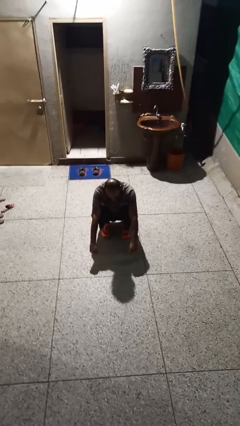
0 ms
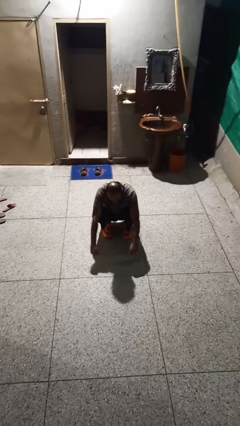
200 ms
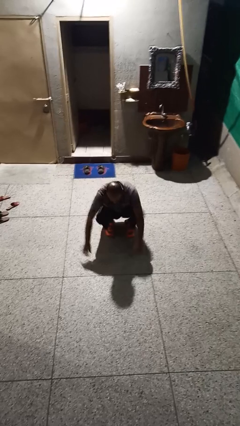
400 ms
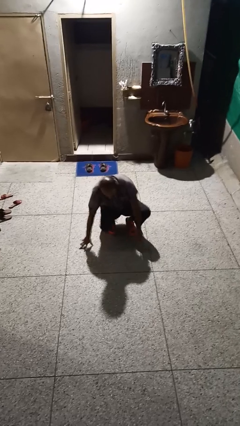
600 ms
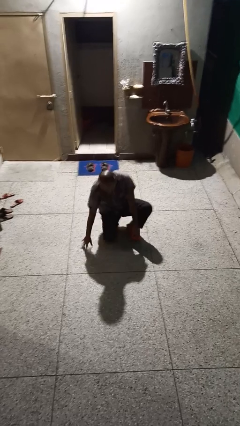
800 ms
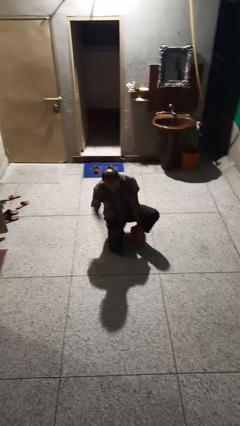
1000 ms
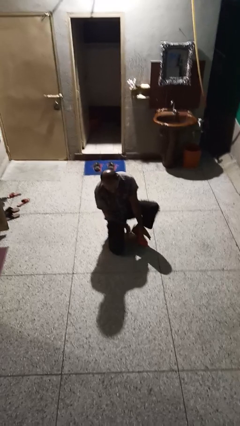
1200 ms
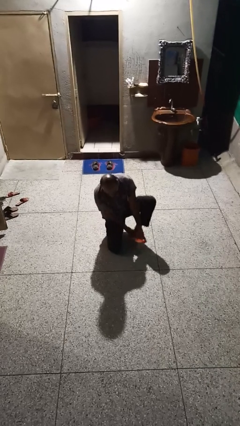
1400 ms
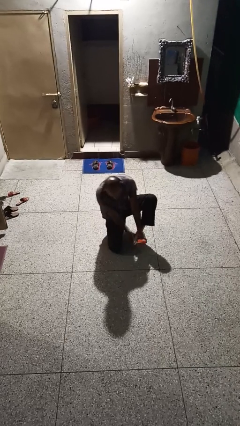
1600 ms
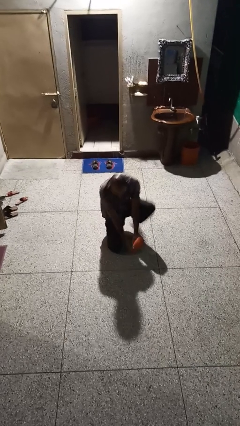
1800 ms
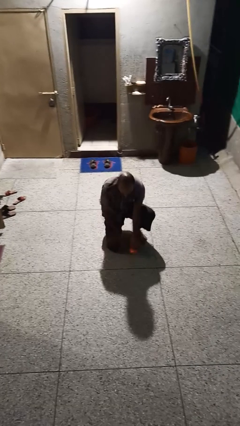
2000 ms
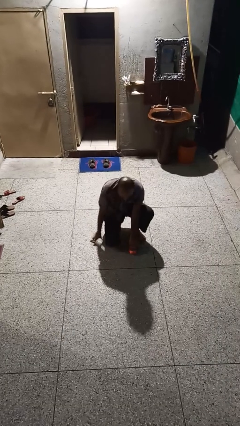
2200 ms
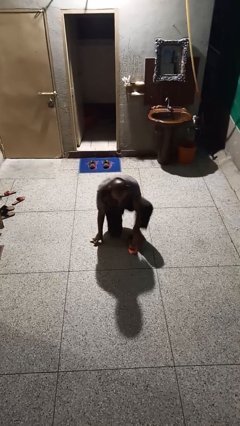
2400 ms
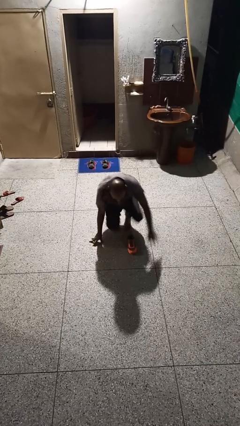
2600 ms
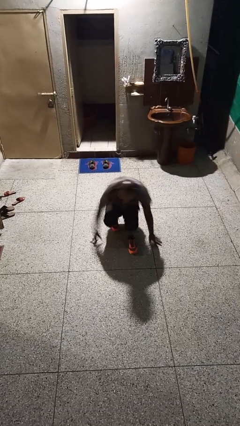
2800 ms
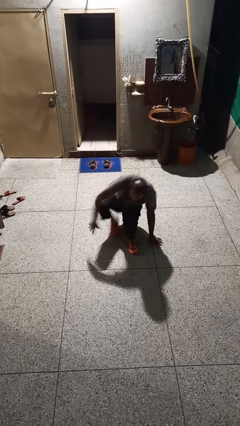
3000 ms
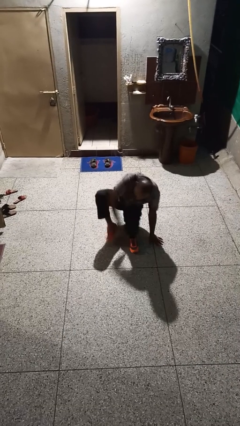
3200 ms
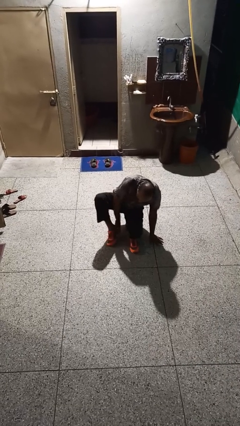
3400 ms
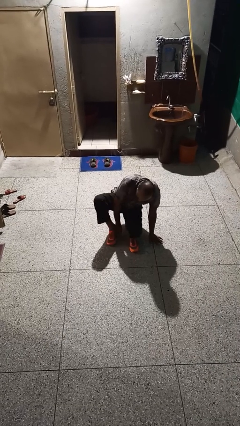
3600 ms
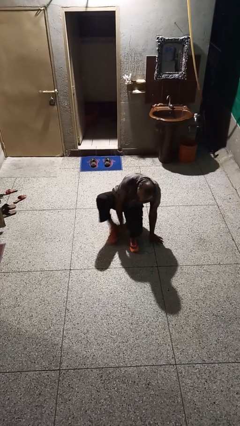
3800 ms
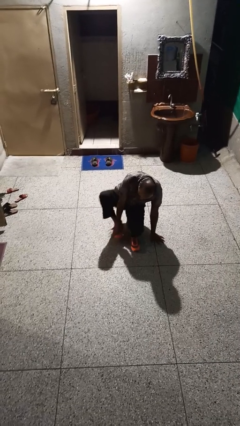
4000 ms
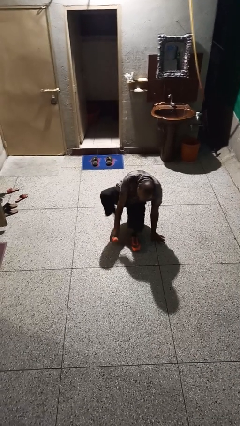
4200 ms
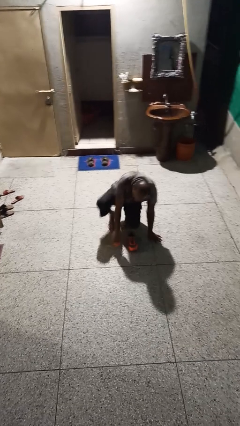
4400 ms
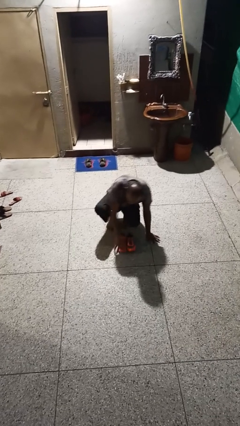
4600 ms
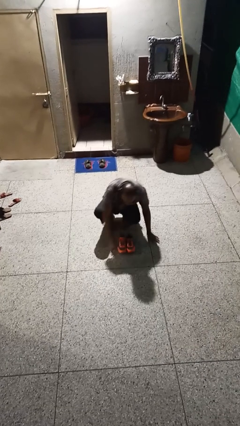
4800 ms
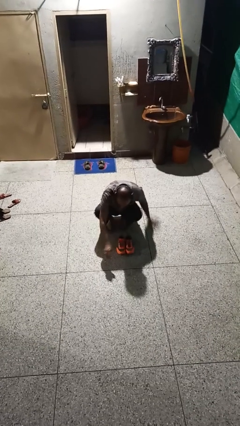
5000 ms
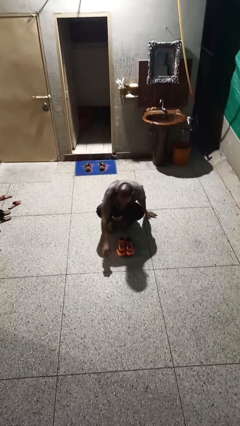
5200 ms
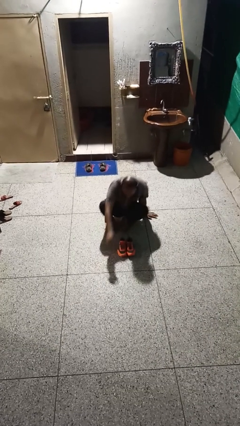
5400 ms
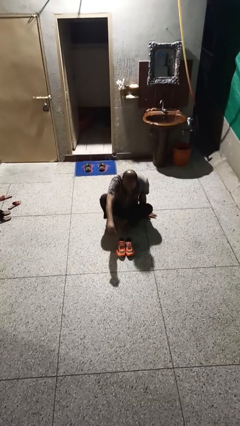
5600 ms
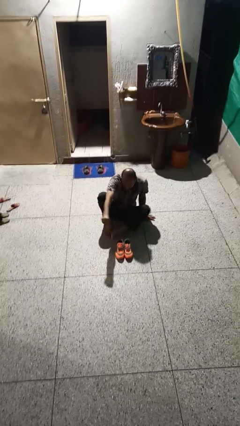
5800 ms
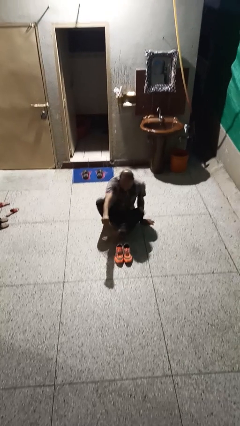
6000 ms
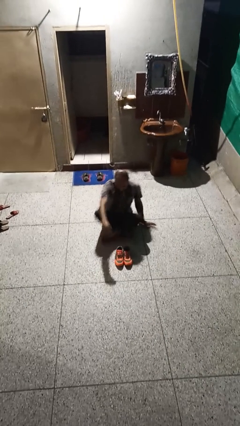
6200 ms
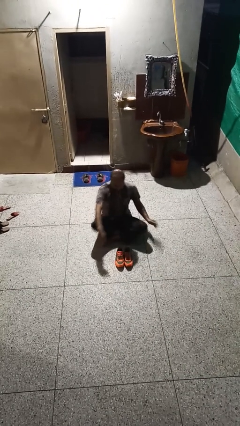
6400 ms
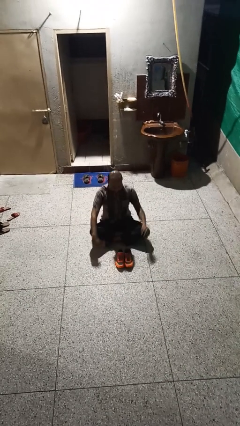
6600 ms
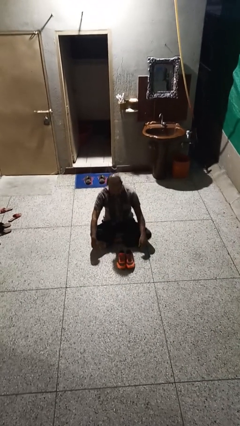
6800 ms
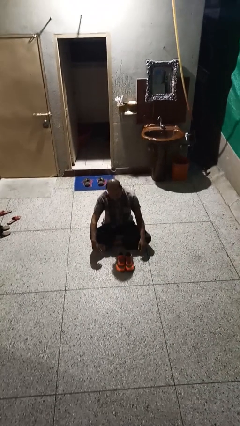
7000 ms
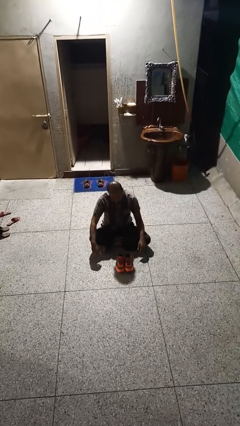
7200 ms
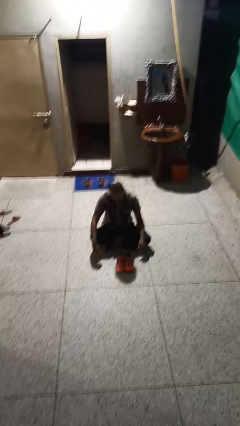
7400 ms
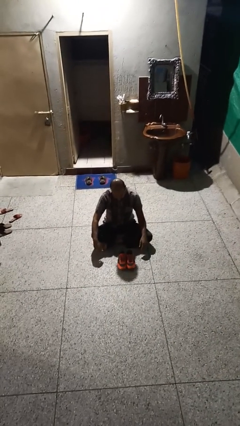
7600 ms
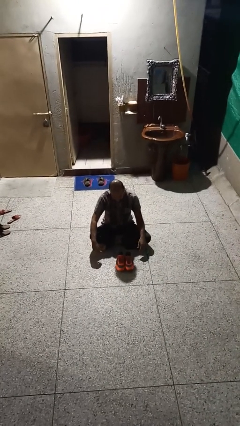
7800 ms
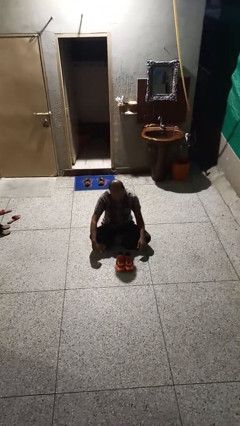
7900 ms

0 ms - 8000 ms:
person takes off shoes

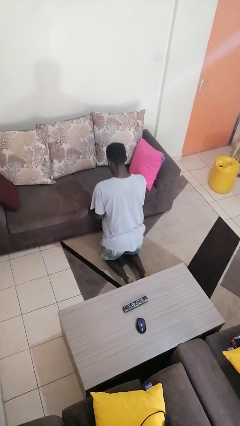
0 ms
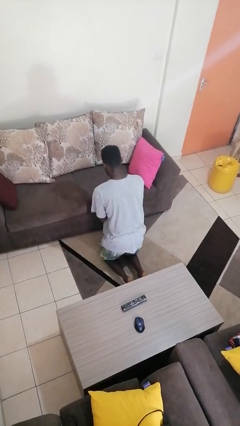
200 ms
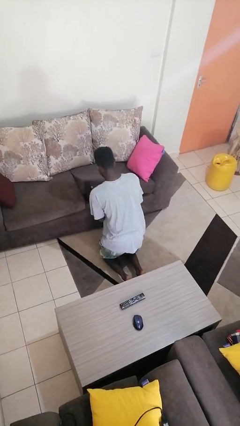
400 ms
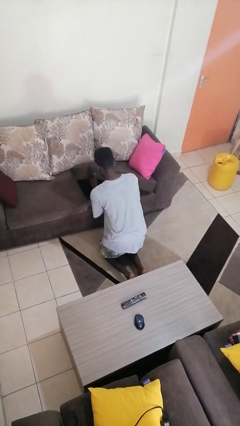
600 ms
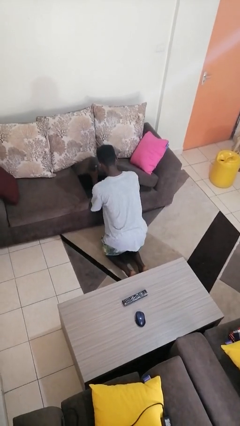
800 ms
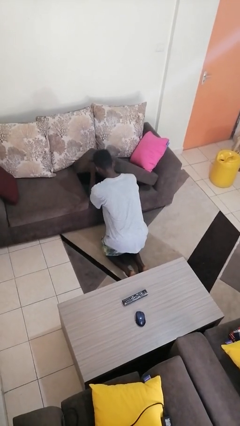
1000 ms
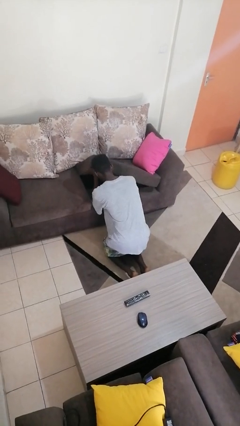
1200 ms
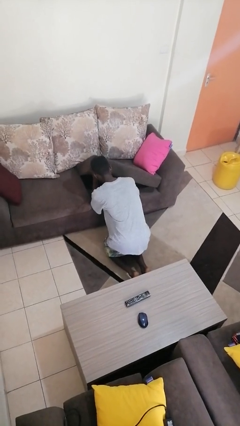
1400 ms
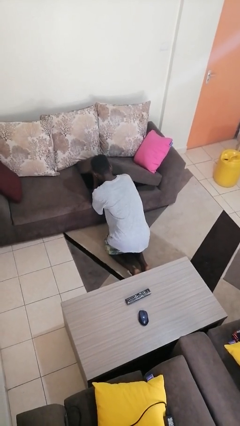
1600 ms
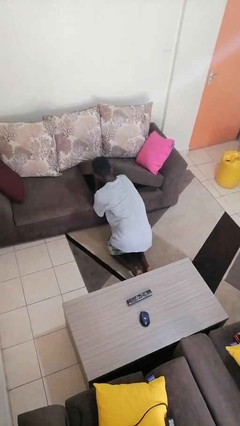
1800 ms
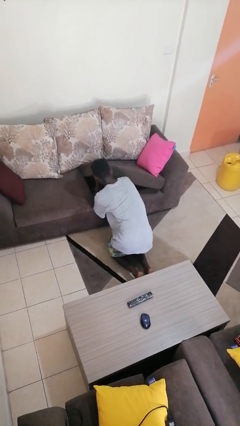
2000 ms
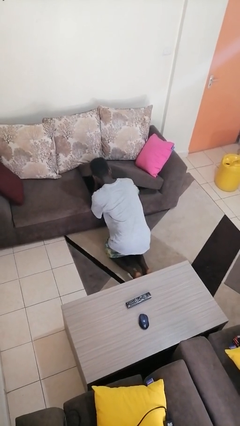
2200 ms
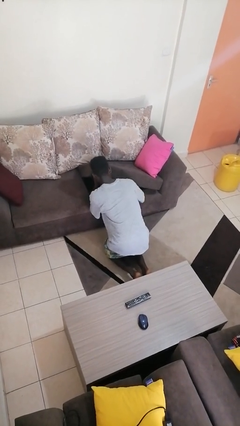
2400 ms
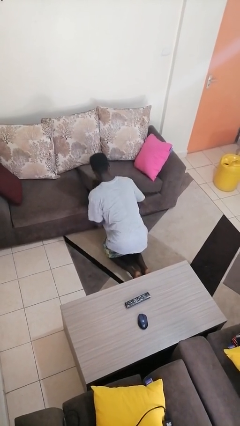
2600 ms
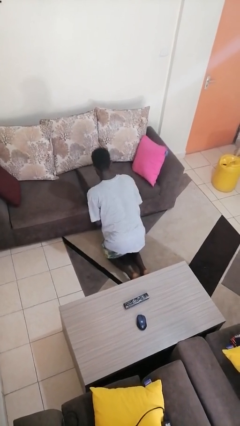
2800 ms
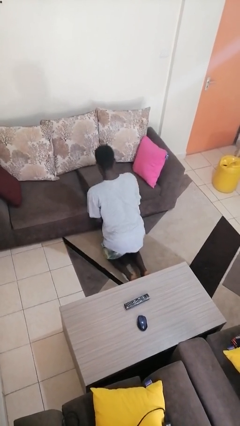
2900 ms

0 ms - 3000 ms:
person searches under couch

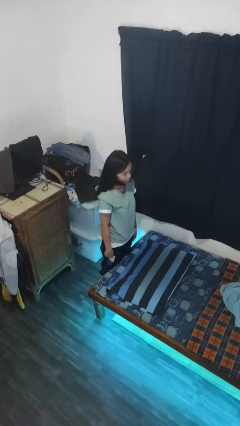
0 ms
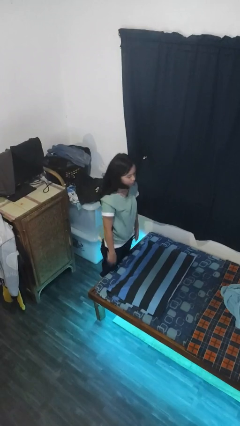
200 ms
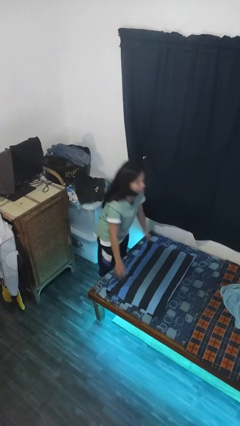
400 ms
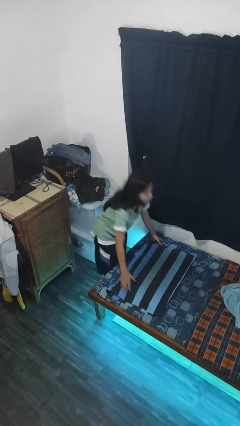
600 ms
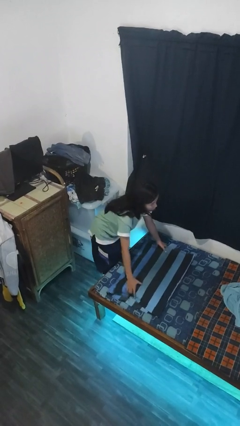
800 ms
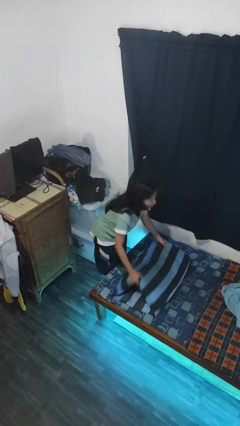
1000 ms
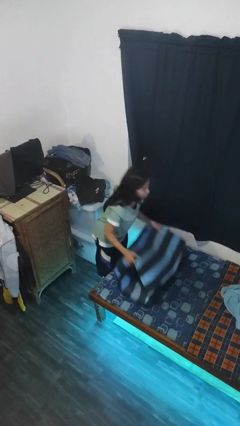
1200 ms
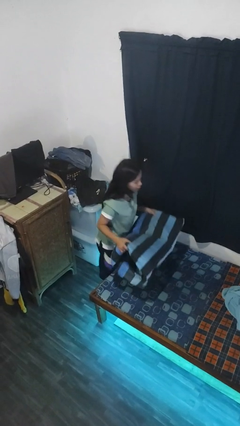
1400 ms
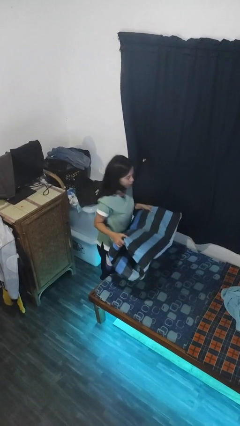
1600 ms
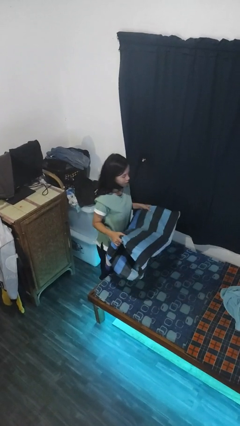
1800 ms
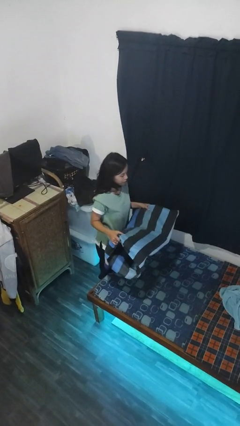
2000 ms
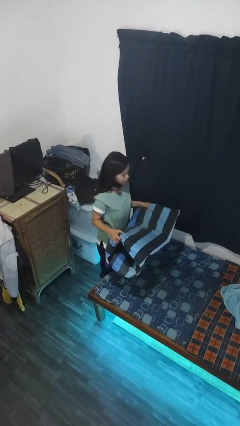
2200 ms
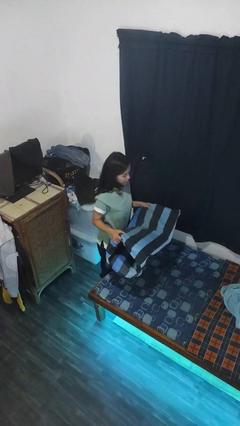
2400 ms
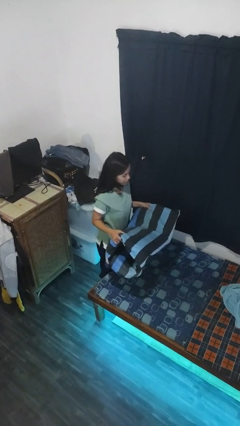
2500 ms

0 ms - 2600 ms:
person picks up object from bed

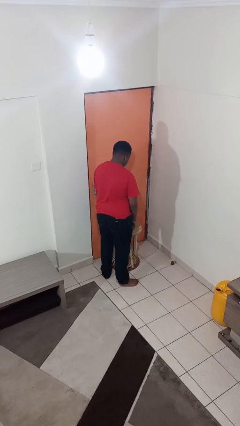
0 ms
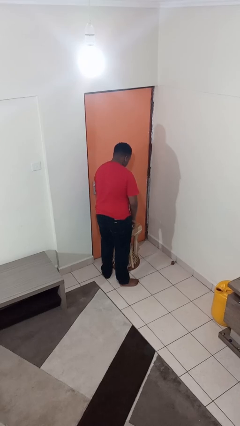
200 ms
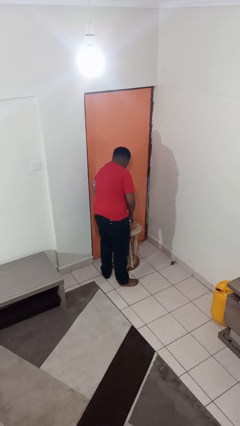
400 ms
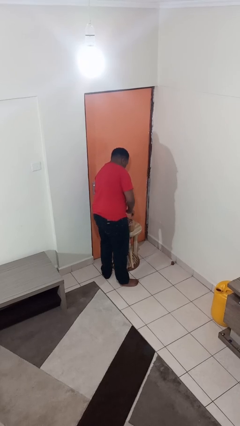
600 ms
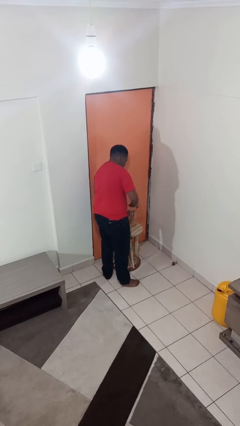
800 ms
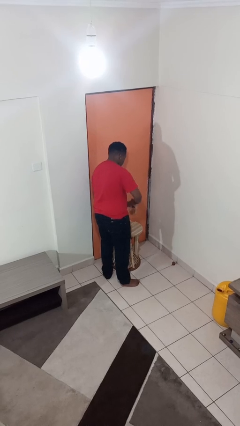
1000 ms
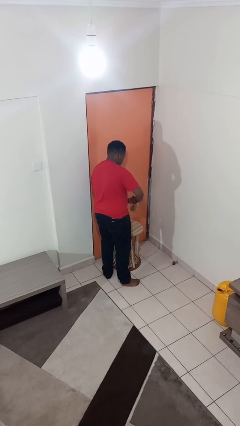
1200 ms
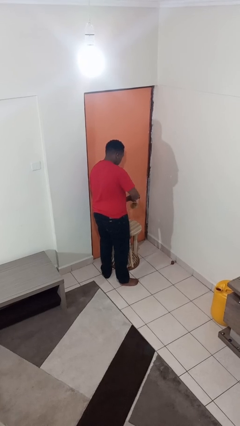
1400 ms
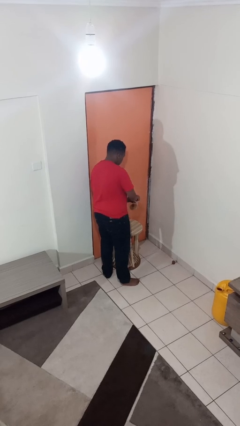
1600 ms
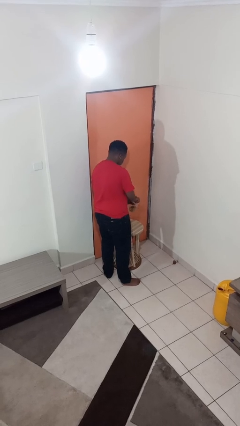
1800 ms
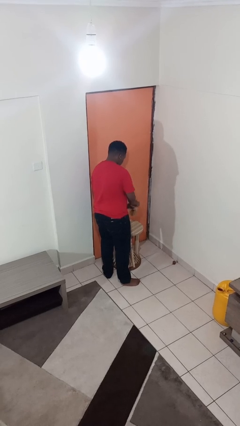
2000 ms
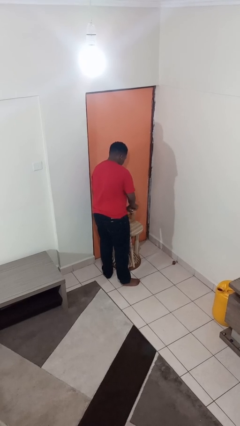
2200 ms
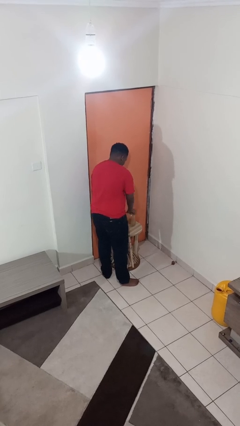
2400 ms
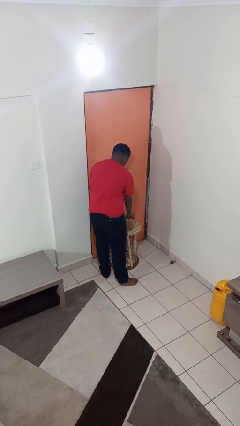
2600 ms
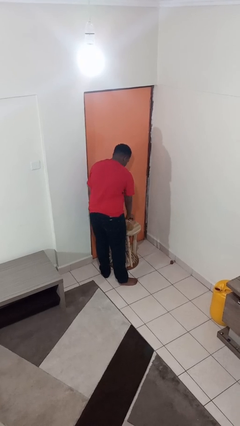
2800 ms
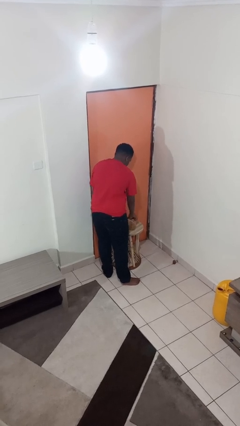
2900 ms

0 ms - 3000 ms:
person closes jar

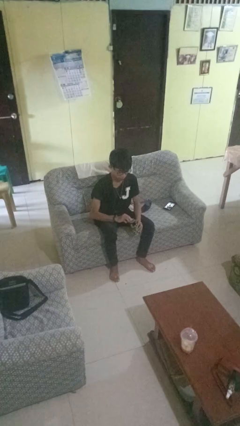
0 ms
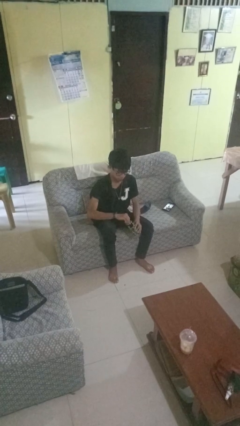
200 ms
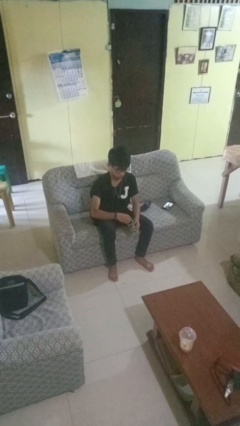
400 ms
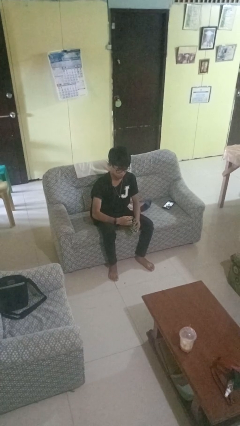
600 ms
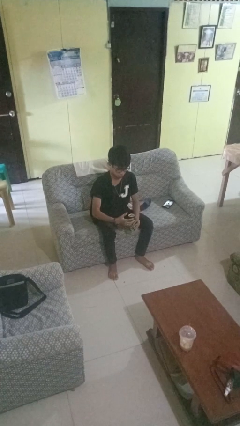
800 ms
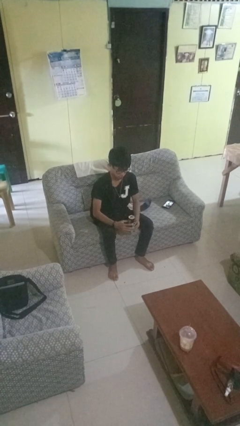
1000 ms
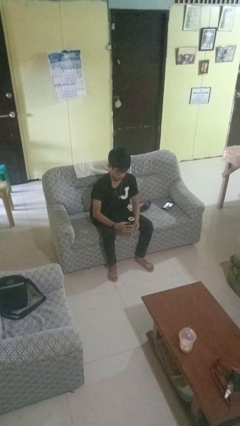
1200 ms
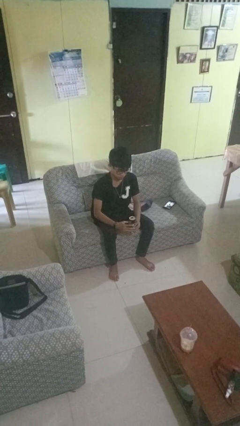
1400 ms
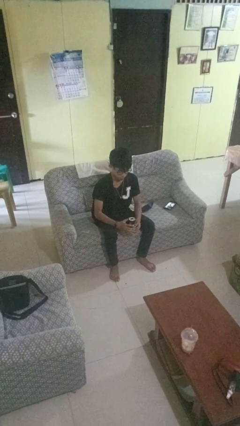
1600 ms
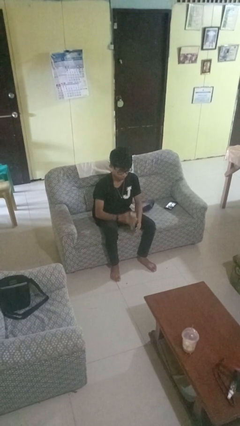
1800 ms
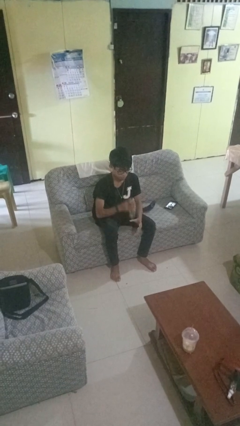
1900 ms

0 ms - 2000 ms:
person opens beverage can
